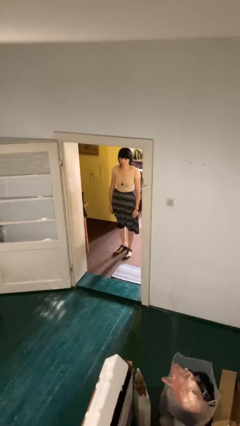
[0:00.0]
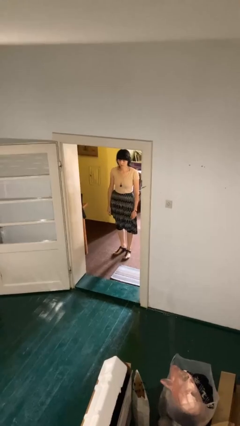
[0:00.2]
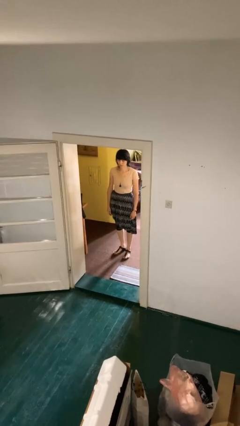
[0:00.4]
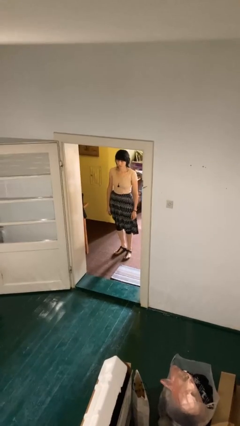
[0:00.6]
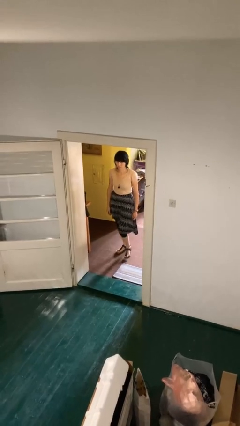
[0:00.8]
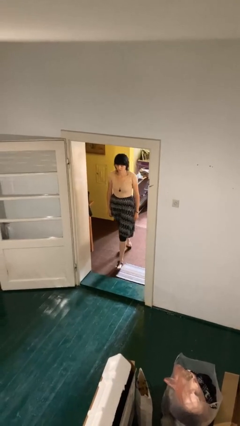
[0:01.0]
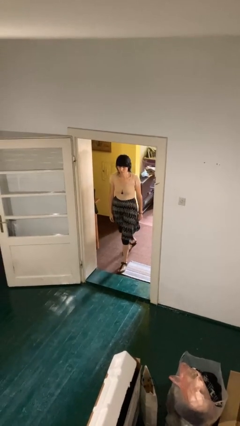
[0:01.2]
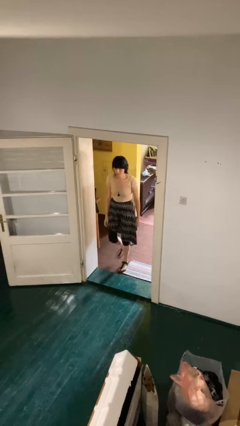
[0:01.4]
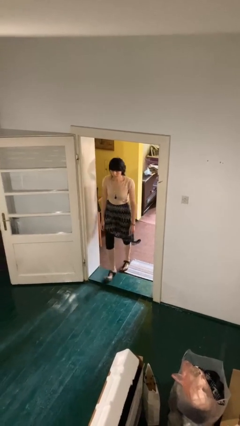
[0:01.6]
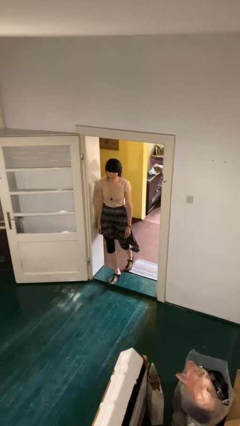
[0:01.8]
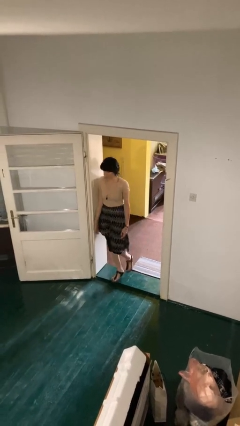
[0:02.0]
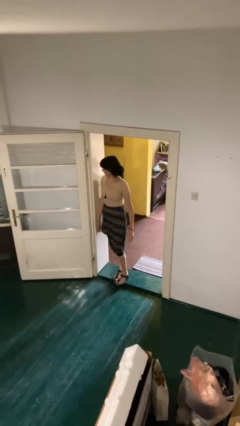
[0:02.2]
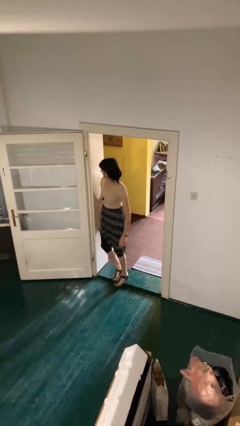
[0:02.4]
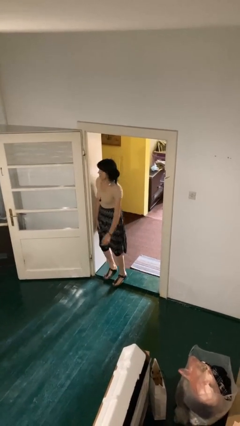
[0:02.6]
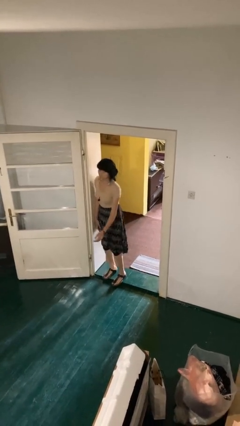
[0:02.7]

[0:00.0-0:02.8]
person bumps into wall

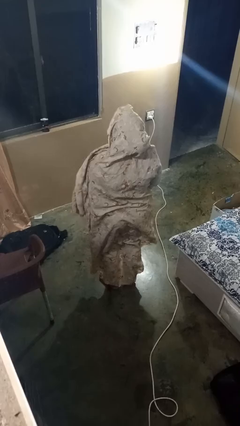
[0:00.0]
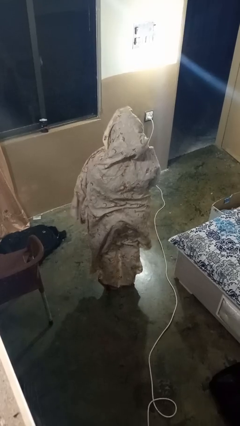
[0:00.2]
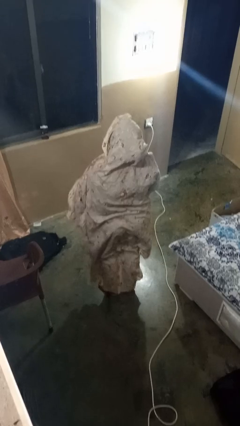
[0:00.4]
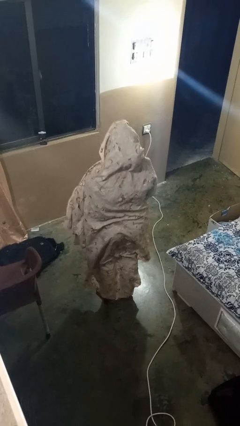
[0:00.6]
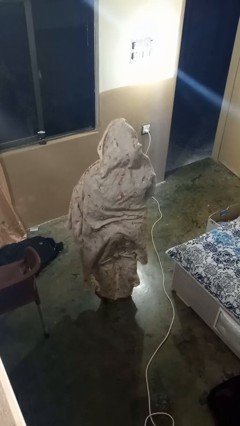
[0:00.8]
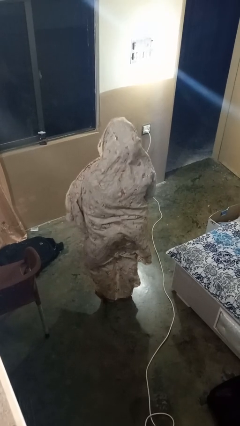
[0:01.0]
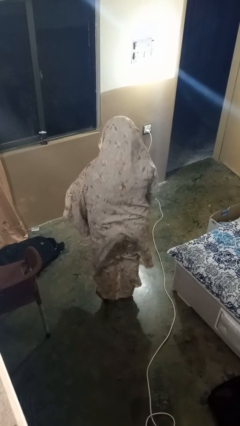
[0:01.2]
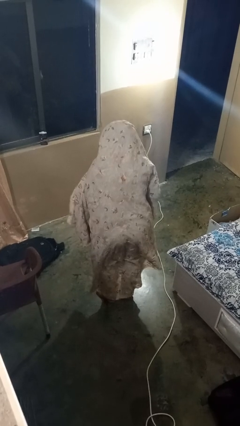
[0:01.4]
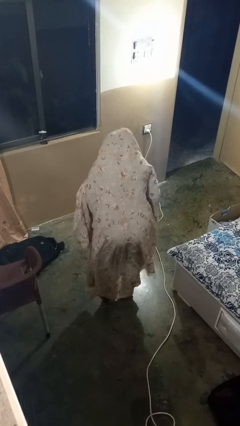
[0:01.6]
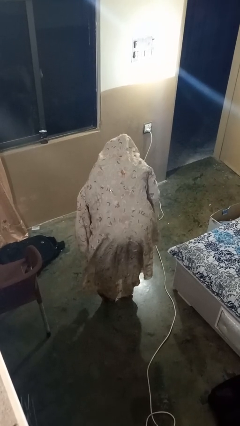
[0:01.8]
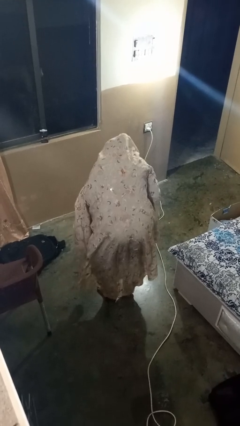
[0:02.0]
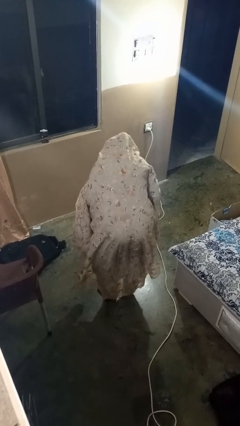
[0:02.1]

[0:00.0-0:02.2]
person bows

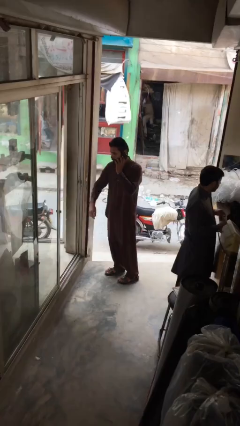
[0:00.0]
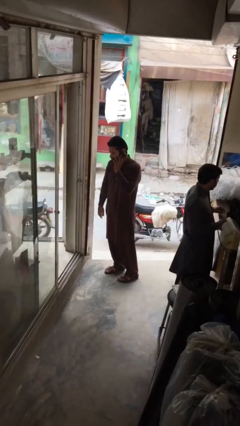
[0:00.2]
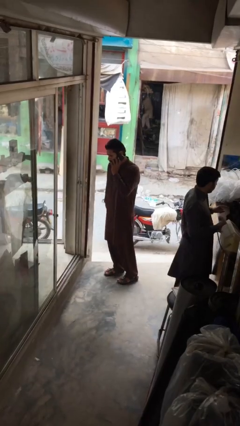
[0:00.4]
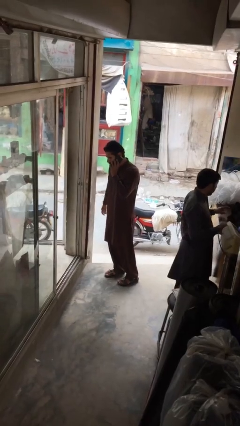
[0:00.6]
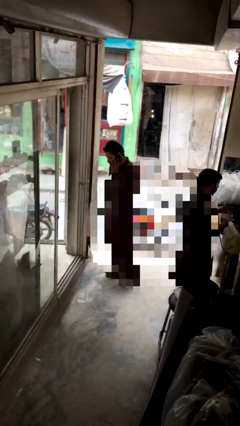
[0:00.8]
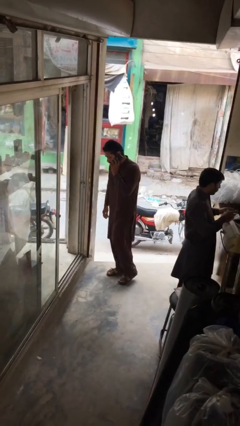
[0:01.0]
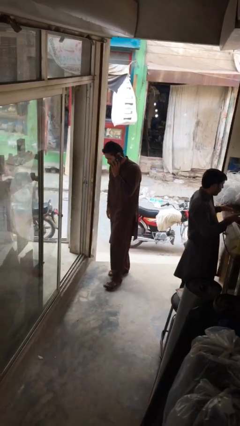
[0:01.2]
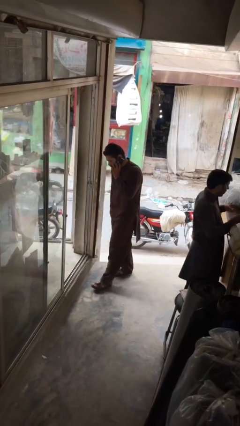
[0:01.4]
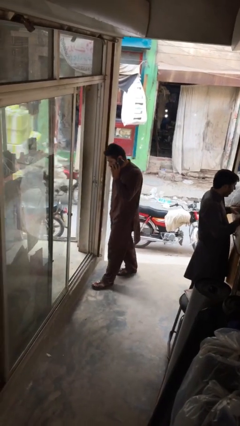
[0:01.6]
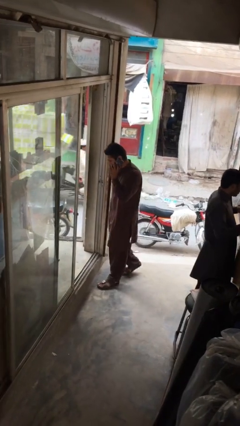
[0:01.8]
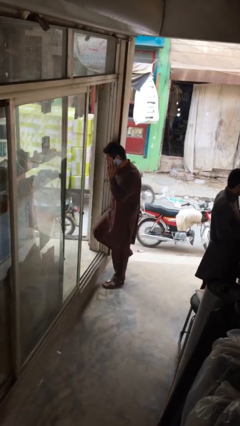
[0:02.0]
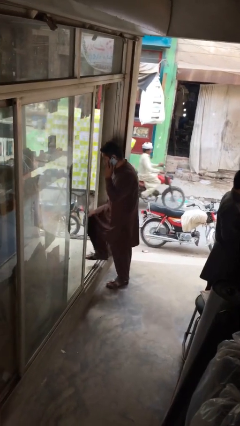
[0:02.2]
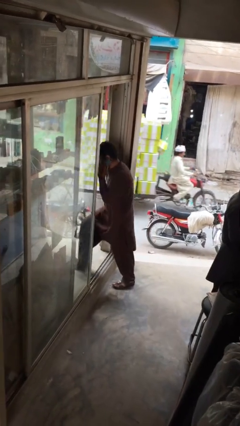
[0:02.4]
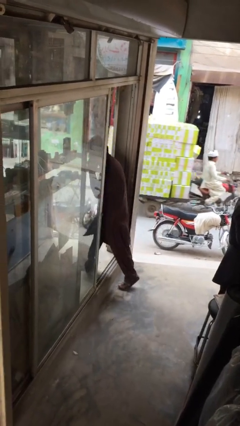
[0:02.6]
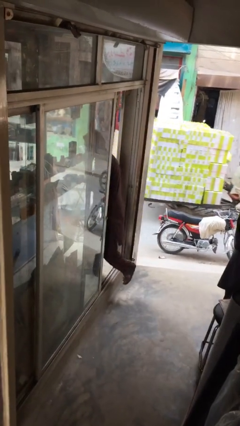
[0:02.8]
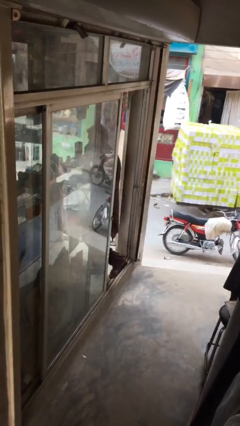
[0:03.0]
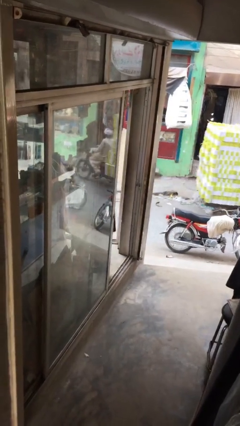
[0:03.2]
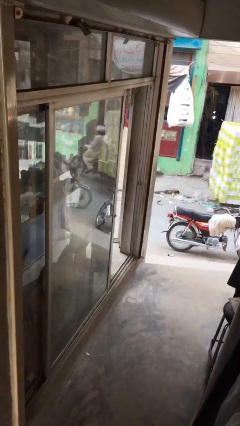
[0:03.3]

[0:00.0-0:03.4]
person exits scene through structure

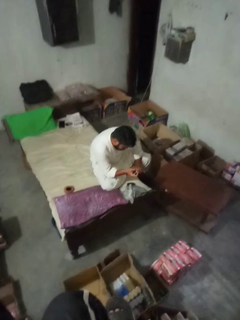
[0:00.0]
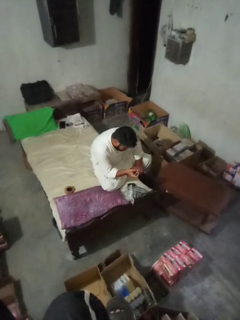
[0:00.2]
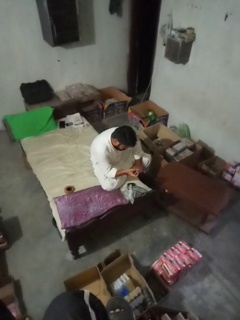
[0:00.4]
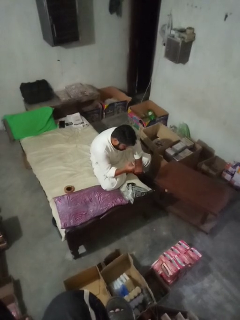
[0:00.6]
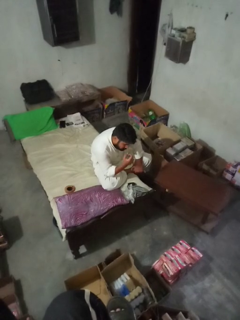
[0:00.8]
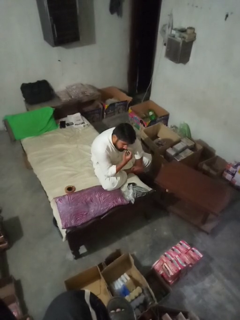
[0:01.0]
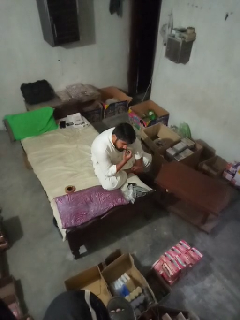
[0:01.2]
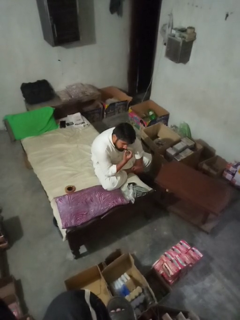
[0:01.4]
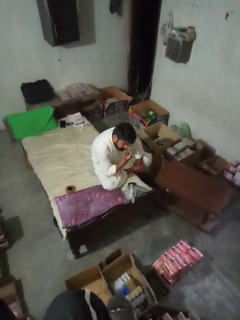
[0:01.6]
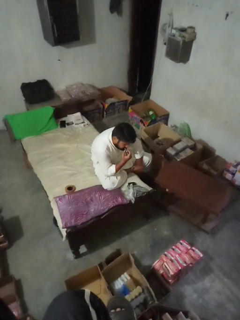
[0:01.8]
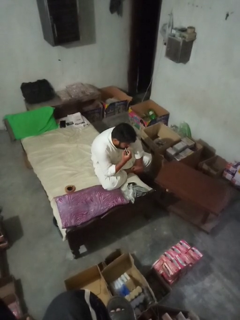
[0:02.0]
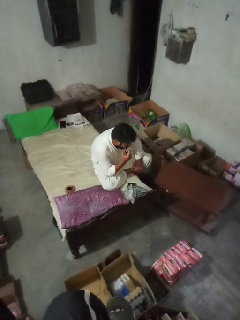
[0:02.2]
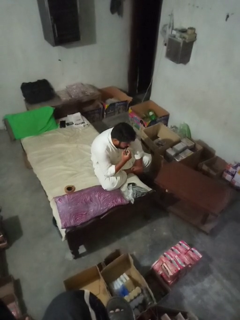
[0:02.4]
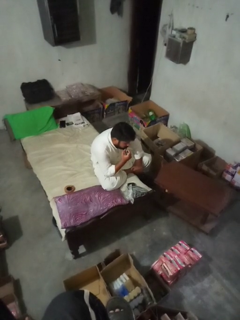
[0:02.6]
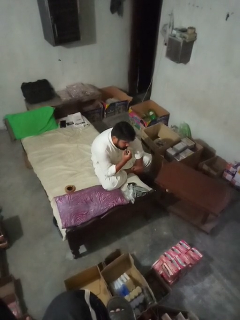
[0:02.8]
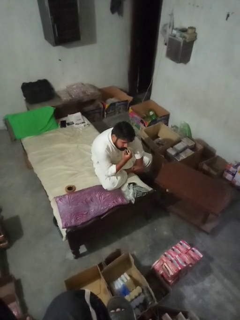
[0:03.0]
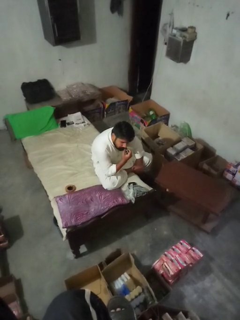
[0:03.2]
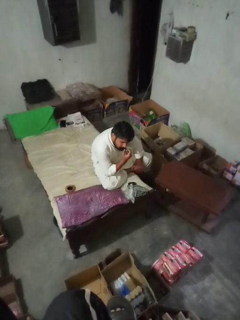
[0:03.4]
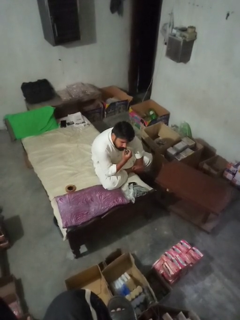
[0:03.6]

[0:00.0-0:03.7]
person applies lip makeup

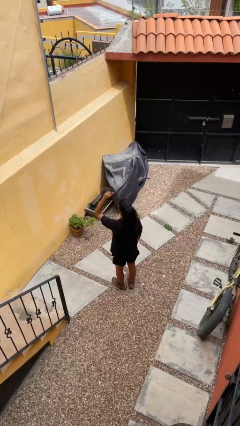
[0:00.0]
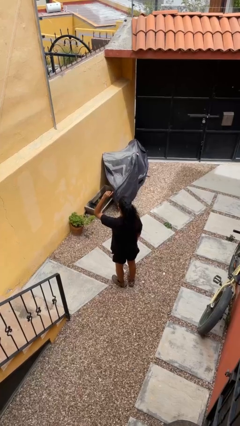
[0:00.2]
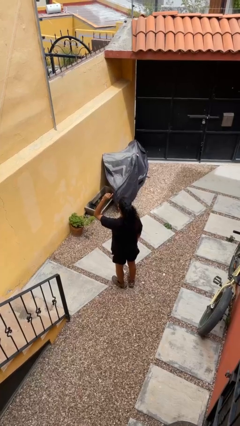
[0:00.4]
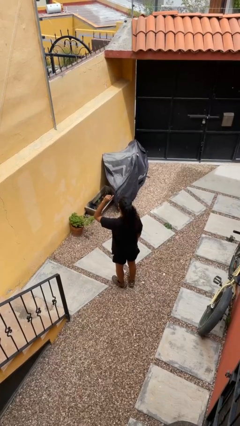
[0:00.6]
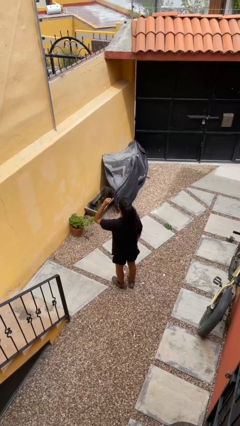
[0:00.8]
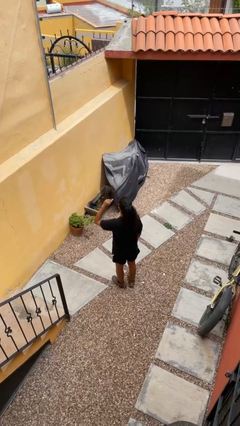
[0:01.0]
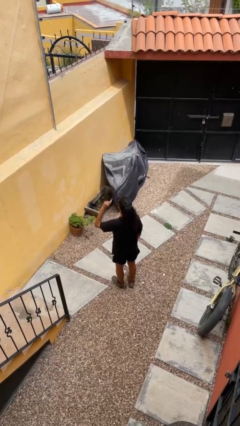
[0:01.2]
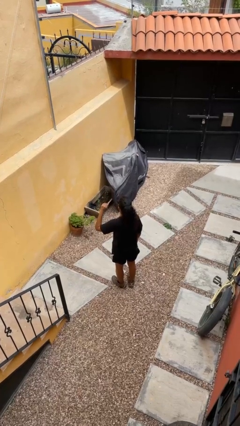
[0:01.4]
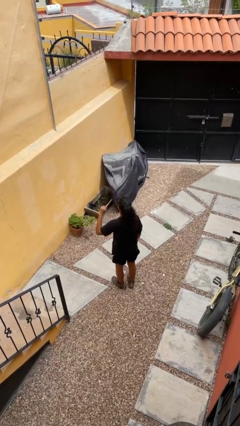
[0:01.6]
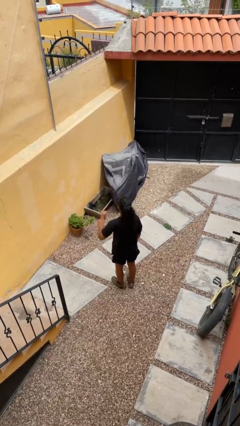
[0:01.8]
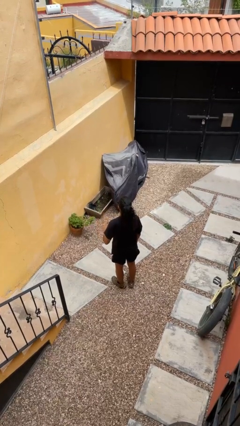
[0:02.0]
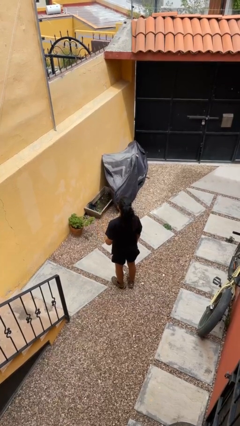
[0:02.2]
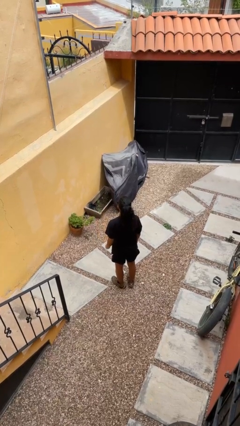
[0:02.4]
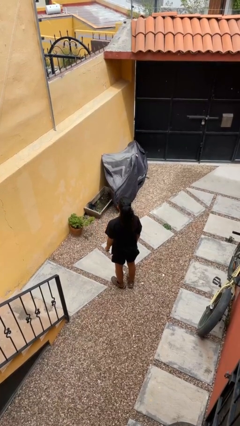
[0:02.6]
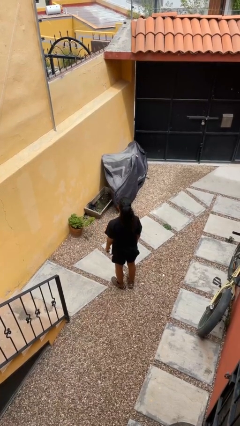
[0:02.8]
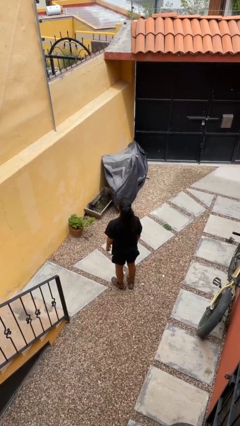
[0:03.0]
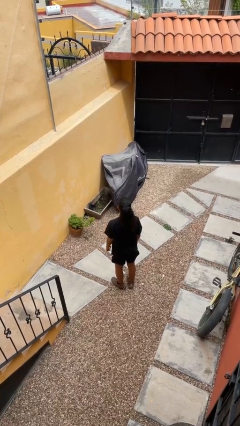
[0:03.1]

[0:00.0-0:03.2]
person gestures lower hand

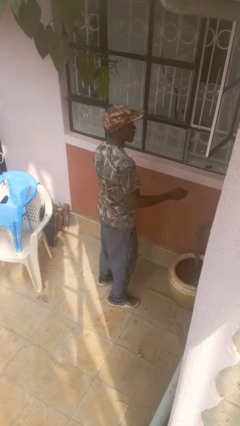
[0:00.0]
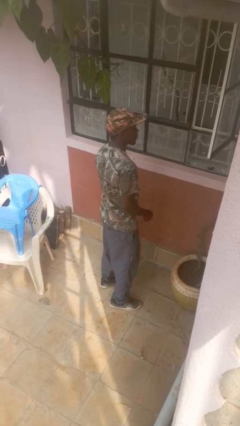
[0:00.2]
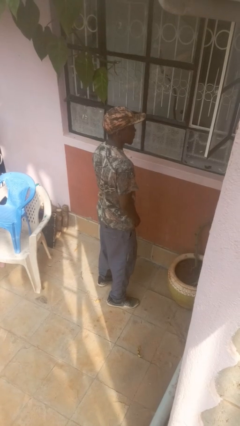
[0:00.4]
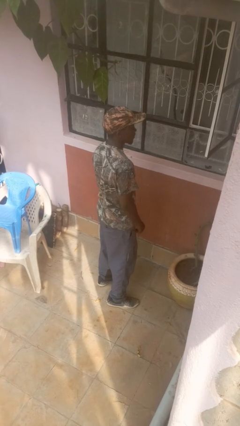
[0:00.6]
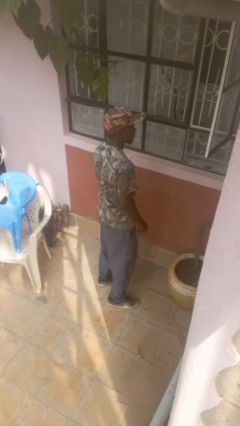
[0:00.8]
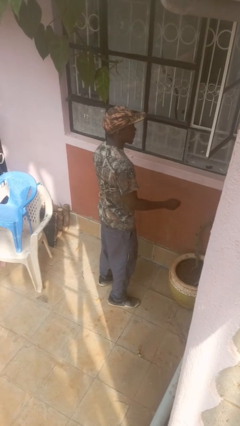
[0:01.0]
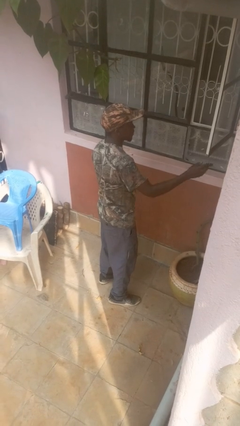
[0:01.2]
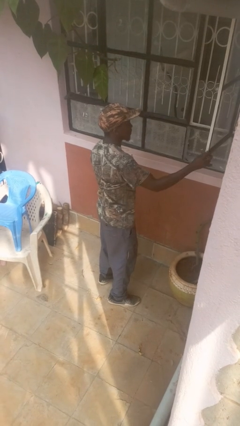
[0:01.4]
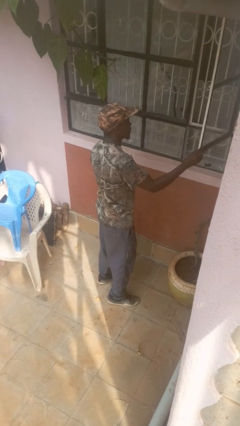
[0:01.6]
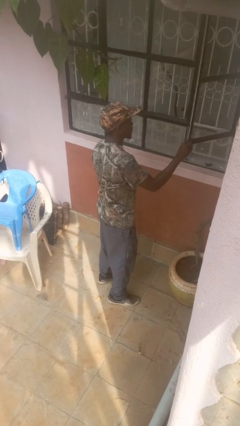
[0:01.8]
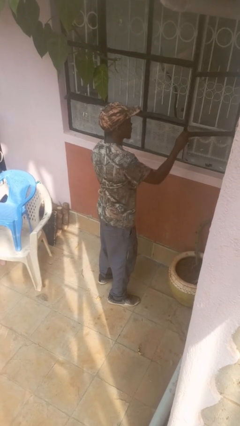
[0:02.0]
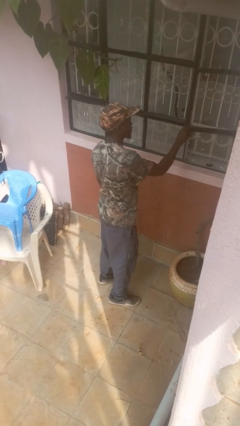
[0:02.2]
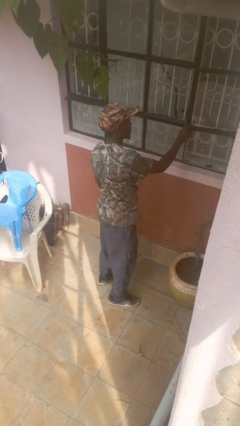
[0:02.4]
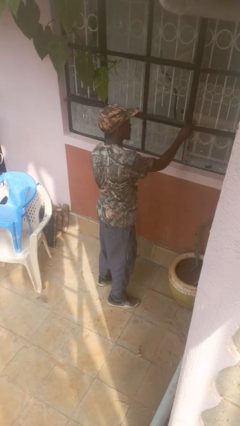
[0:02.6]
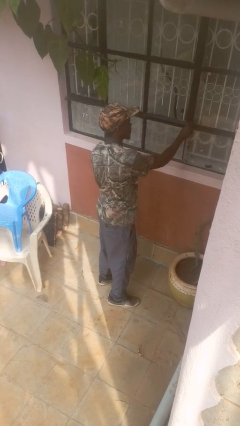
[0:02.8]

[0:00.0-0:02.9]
person closes home window

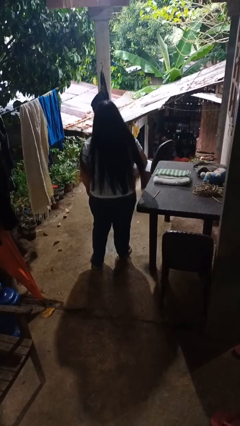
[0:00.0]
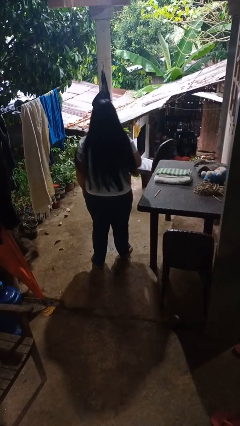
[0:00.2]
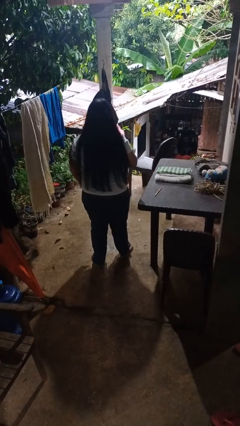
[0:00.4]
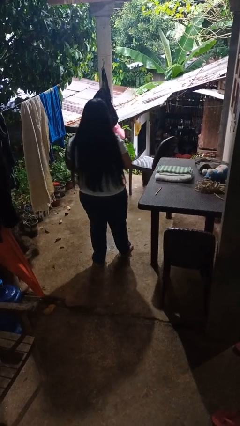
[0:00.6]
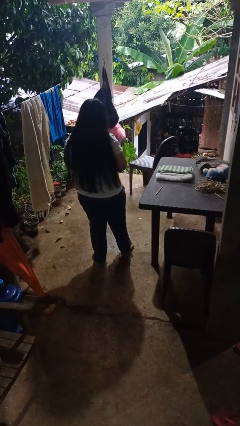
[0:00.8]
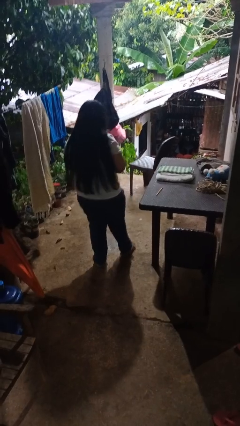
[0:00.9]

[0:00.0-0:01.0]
person bumps into table
